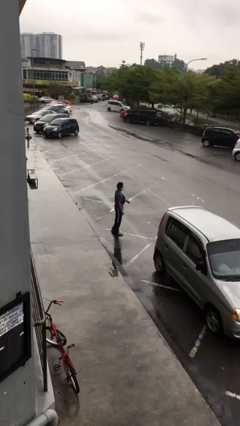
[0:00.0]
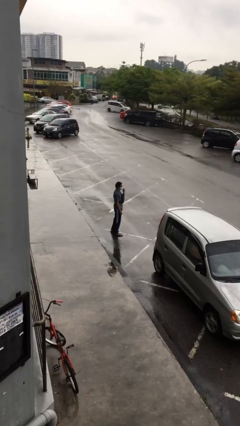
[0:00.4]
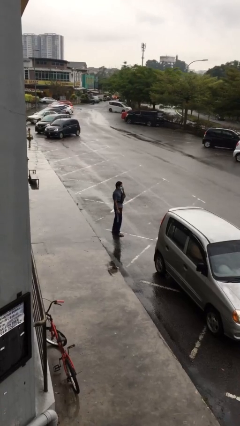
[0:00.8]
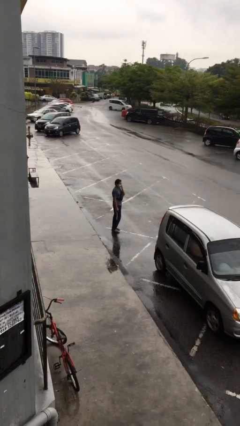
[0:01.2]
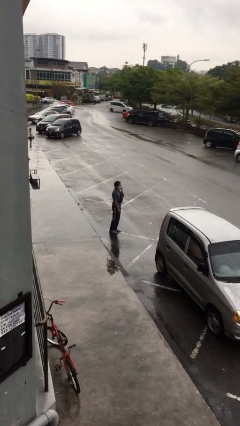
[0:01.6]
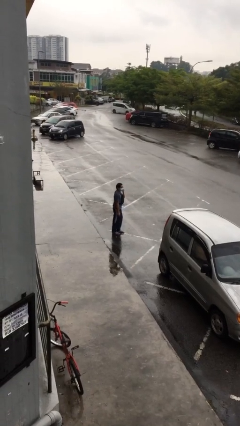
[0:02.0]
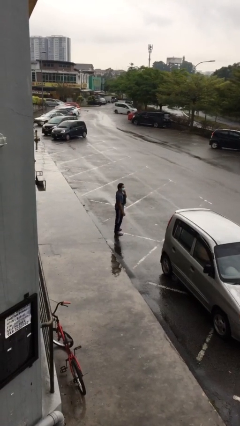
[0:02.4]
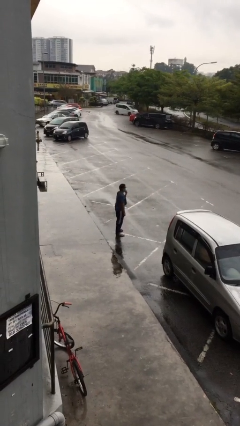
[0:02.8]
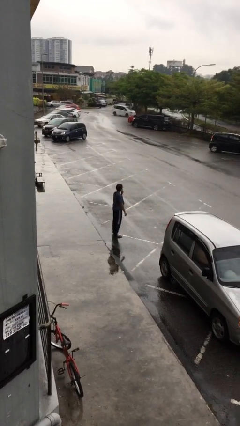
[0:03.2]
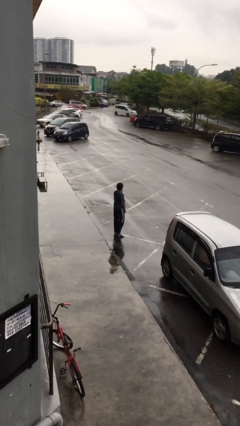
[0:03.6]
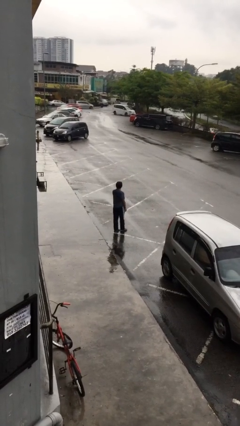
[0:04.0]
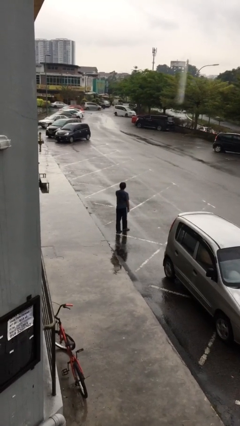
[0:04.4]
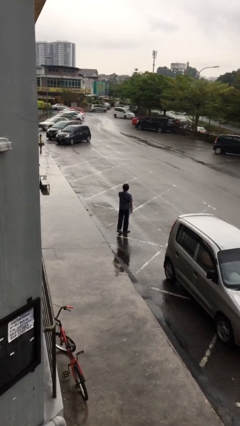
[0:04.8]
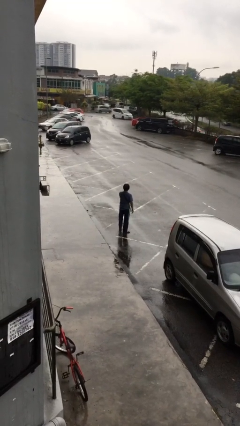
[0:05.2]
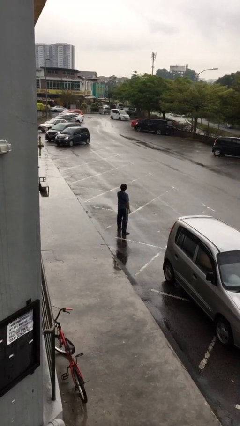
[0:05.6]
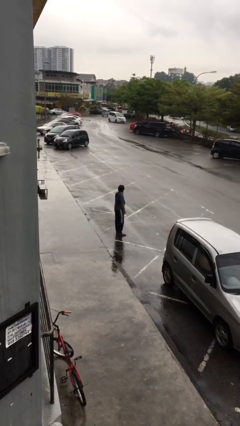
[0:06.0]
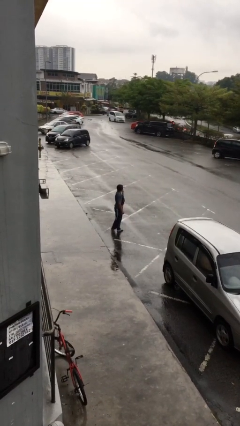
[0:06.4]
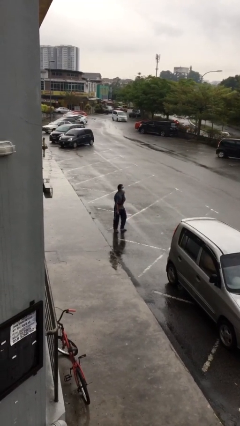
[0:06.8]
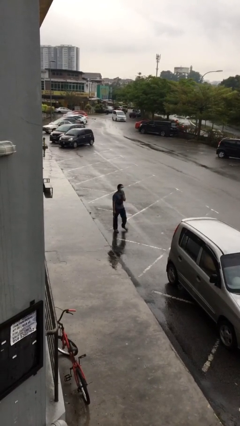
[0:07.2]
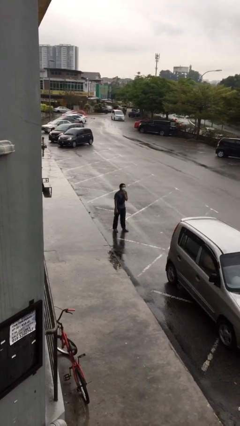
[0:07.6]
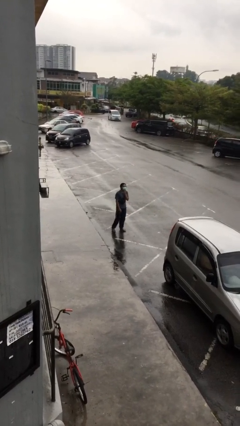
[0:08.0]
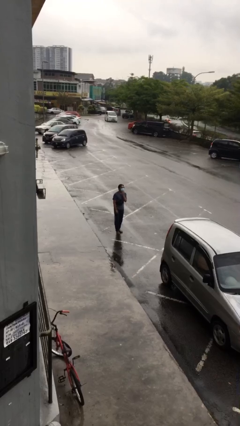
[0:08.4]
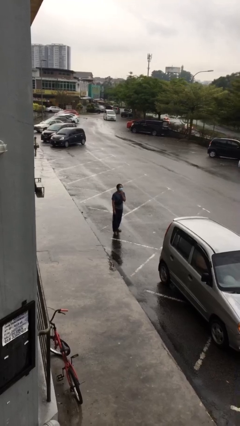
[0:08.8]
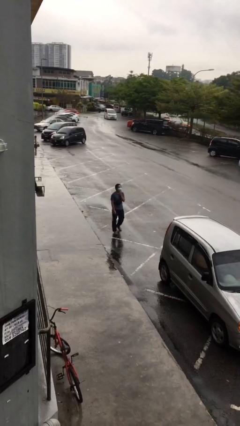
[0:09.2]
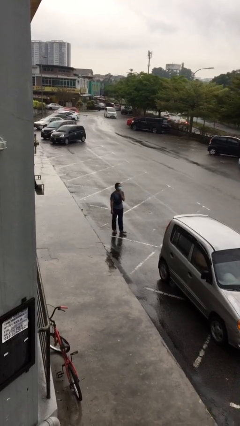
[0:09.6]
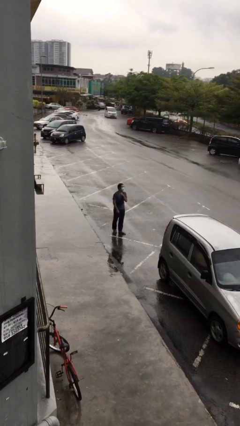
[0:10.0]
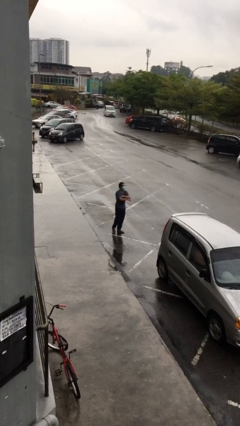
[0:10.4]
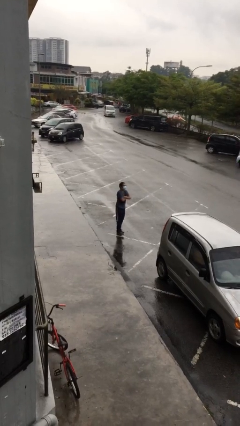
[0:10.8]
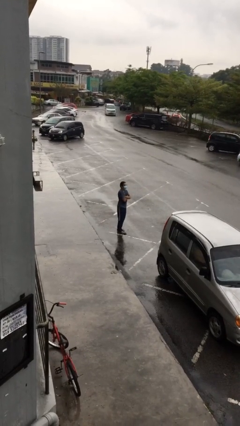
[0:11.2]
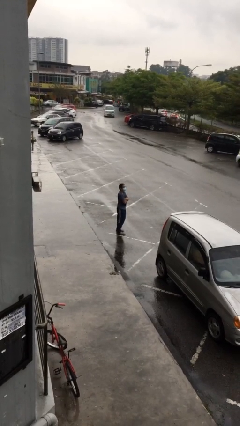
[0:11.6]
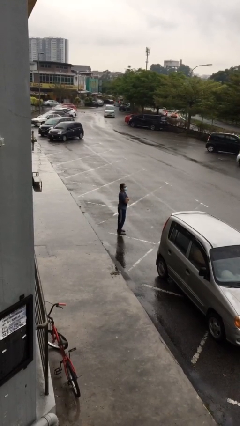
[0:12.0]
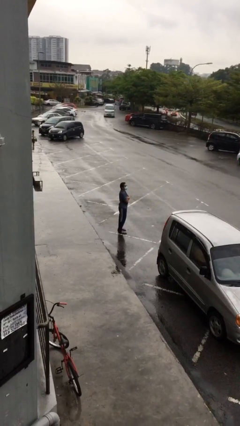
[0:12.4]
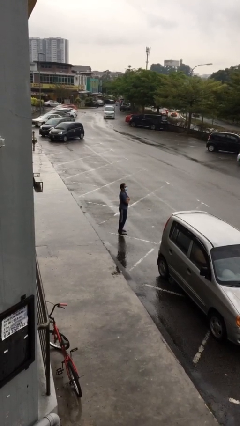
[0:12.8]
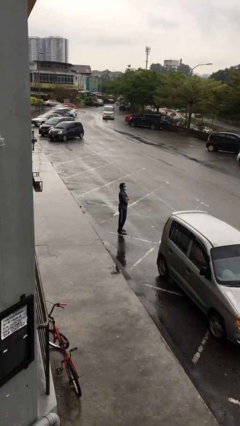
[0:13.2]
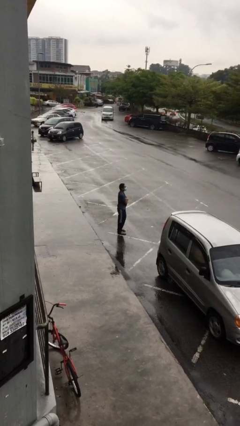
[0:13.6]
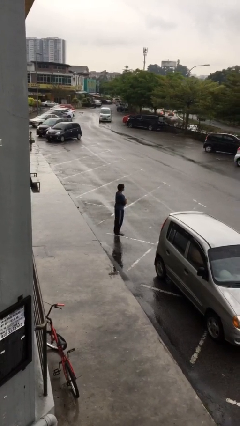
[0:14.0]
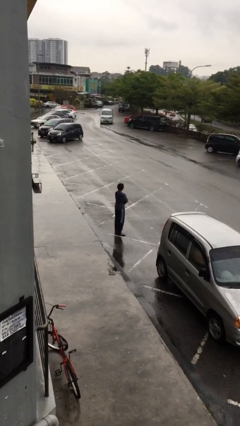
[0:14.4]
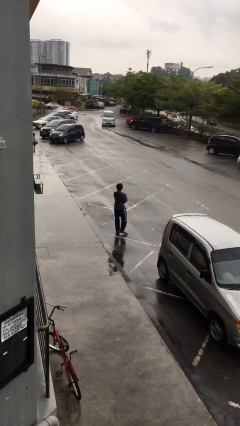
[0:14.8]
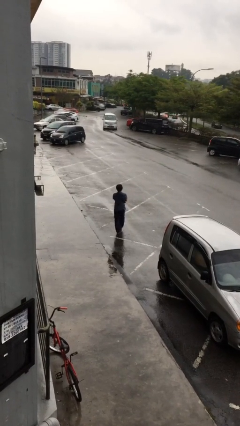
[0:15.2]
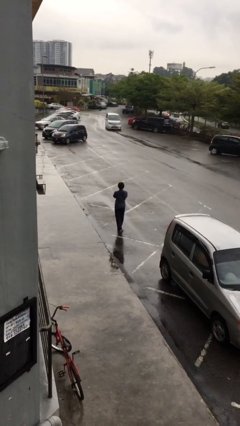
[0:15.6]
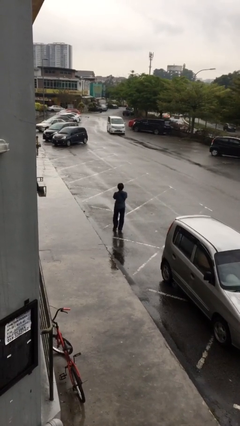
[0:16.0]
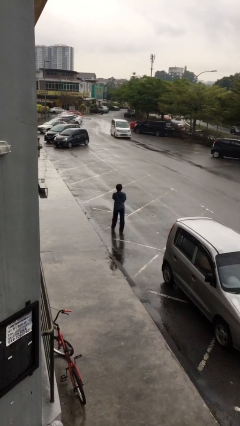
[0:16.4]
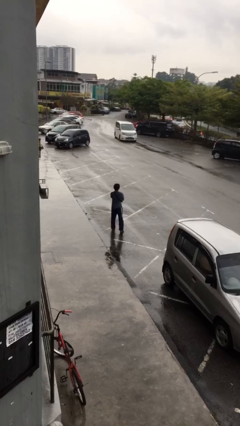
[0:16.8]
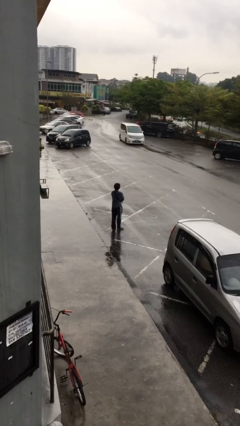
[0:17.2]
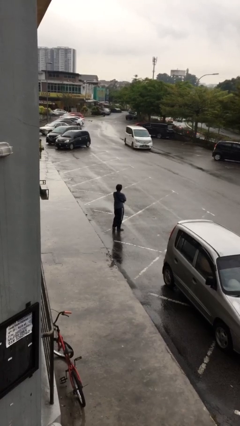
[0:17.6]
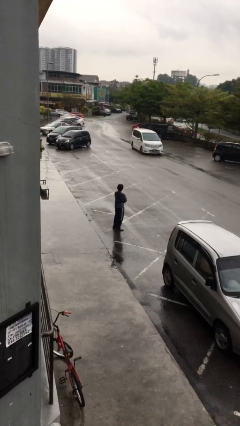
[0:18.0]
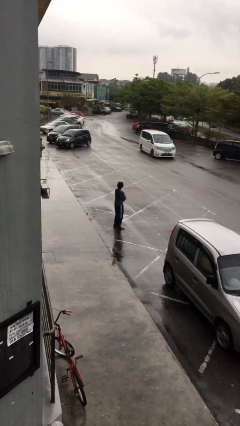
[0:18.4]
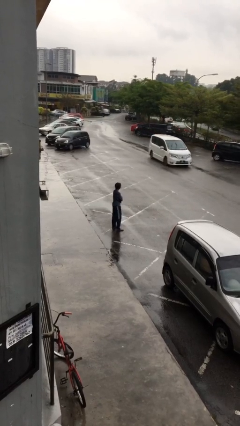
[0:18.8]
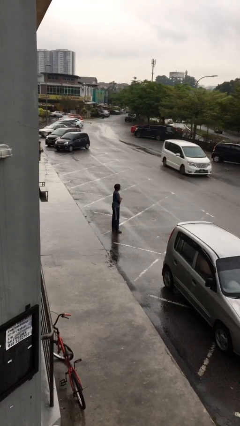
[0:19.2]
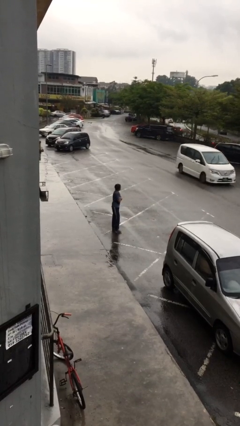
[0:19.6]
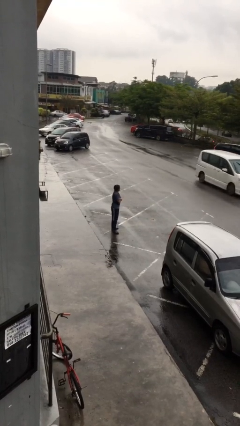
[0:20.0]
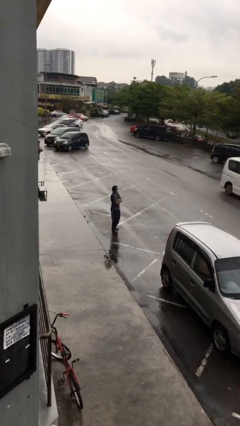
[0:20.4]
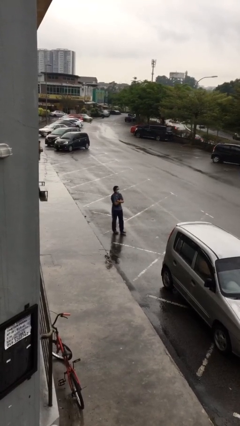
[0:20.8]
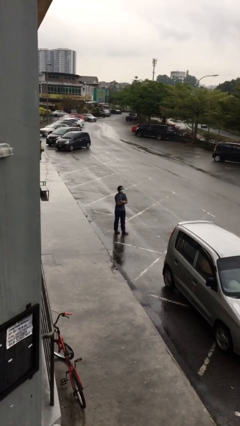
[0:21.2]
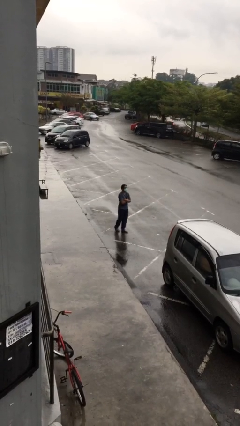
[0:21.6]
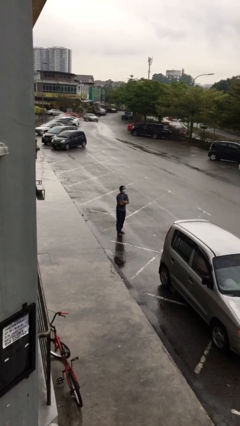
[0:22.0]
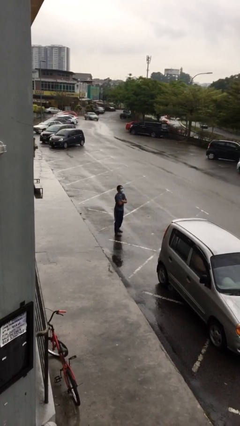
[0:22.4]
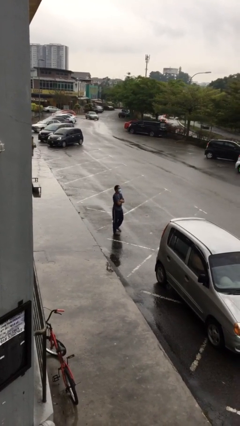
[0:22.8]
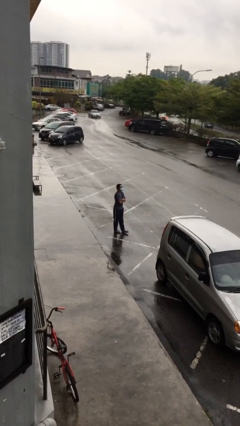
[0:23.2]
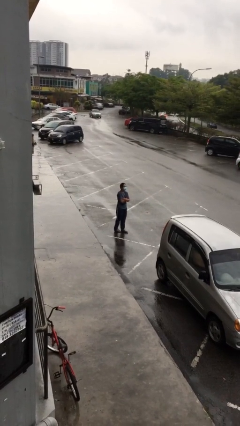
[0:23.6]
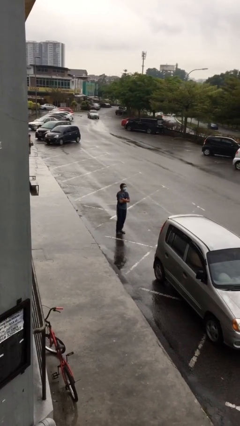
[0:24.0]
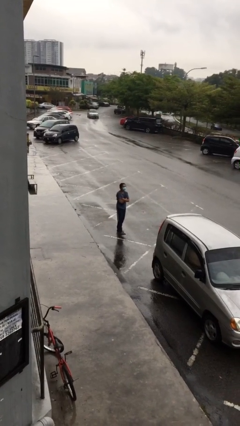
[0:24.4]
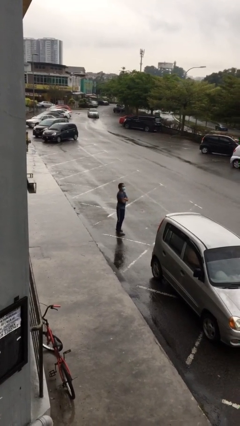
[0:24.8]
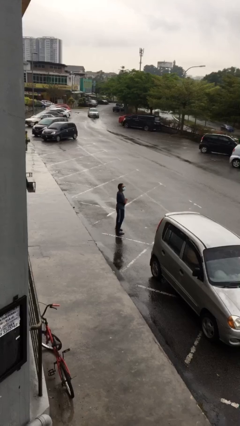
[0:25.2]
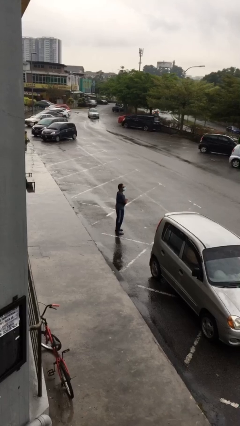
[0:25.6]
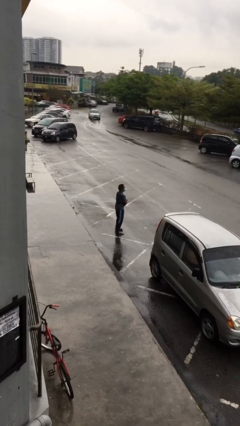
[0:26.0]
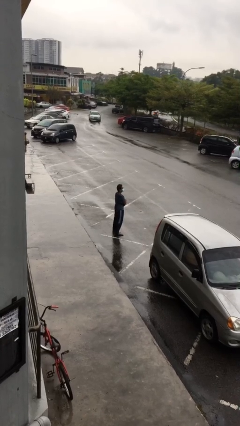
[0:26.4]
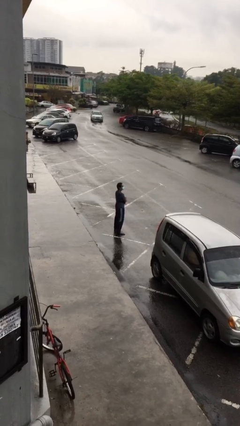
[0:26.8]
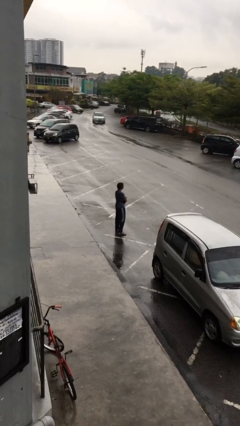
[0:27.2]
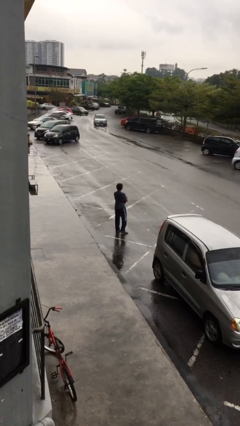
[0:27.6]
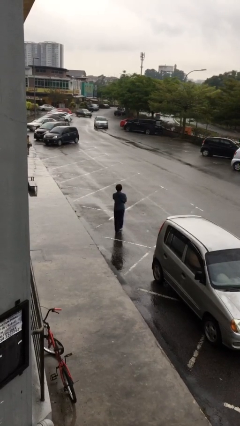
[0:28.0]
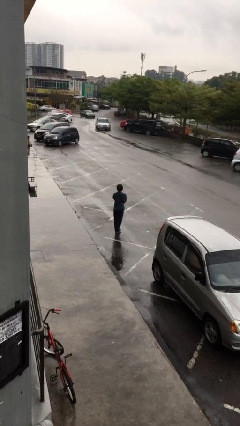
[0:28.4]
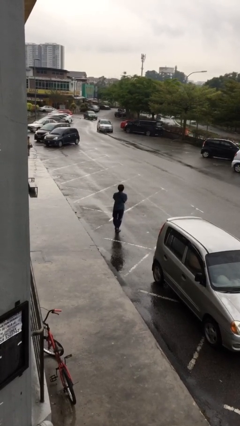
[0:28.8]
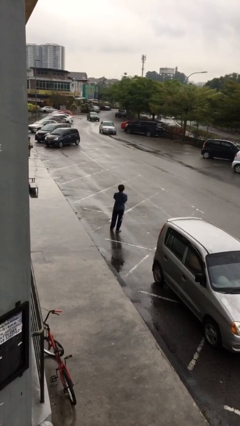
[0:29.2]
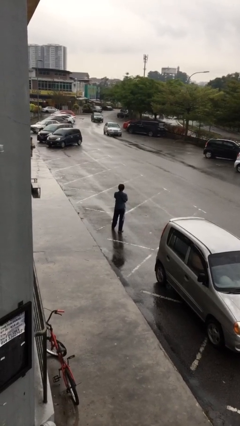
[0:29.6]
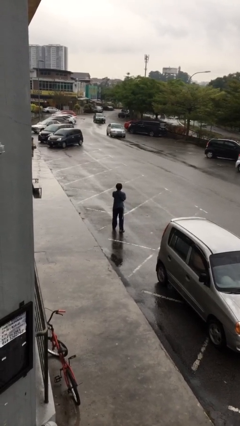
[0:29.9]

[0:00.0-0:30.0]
person walks

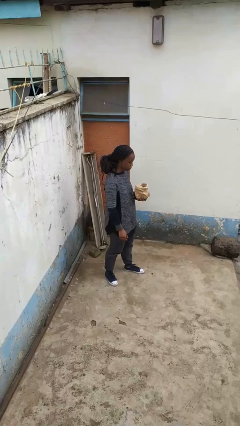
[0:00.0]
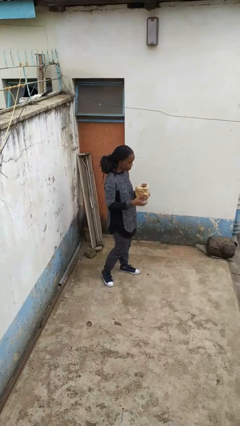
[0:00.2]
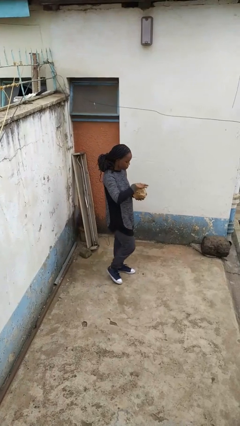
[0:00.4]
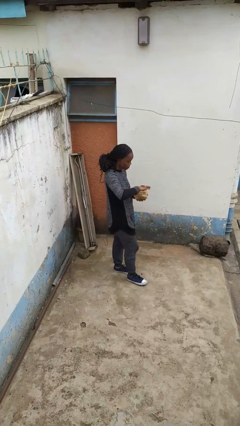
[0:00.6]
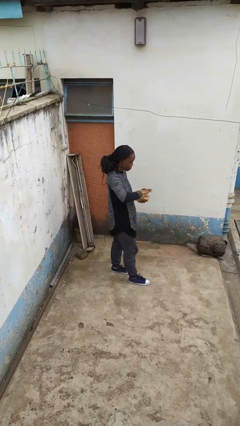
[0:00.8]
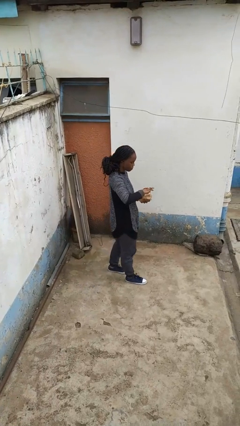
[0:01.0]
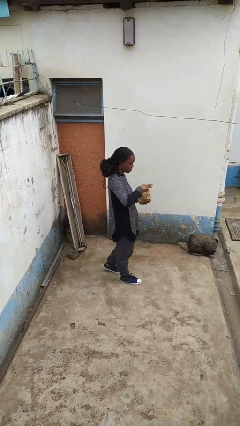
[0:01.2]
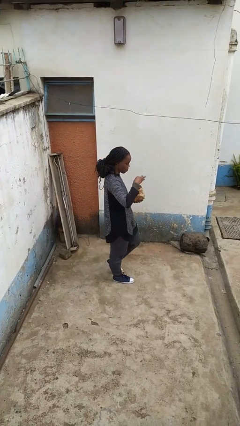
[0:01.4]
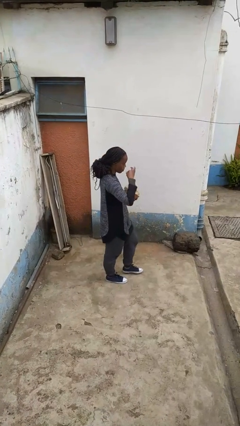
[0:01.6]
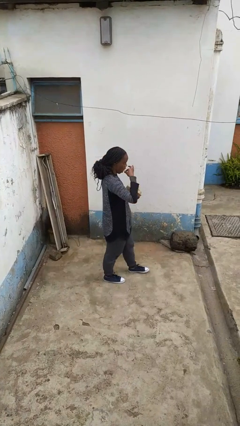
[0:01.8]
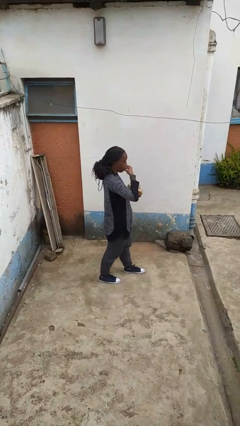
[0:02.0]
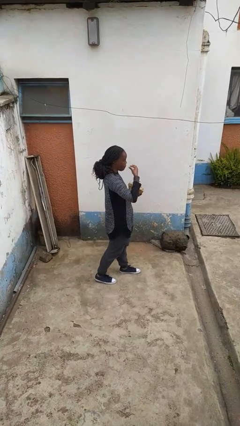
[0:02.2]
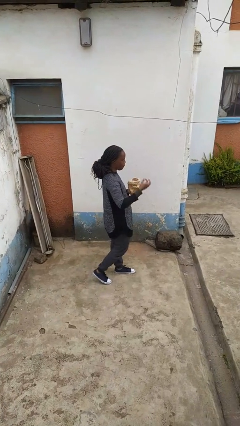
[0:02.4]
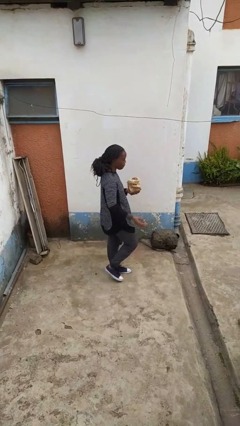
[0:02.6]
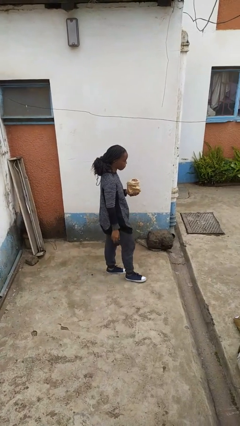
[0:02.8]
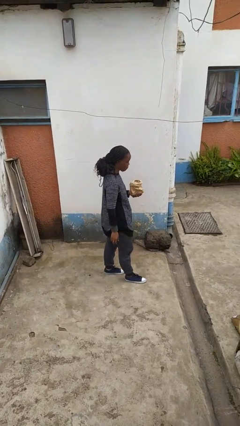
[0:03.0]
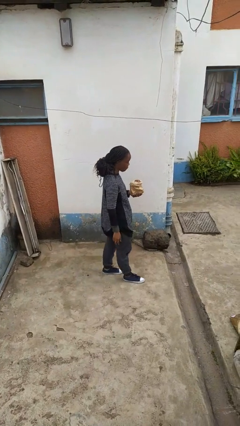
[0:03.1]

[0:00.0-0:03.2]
person eats snack from bag

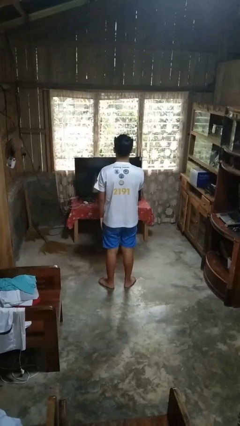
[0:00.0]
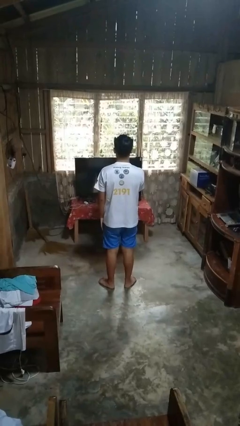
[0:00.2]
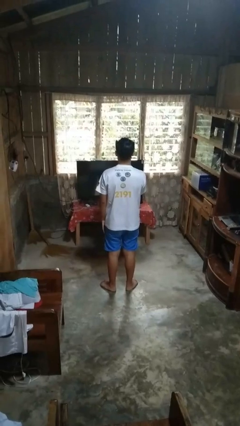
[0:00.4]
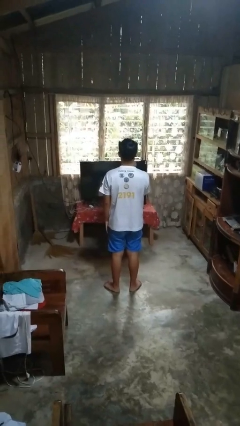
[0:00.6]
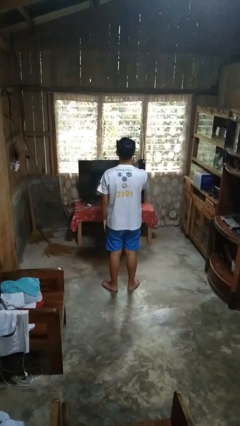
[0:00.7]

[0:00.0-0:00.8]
person gestures come here
